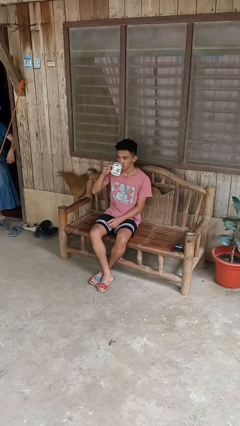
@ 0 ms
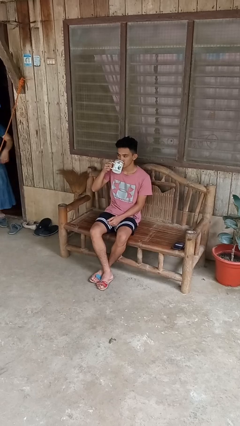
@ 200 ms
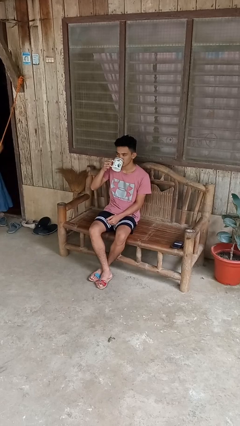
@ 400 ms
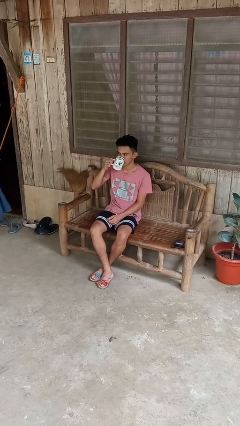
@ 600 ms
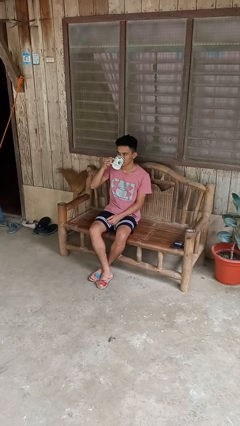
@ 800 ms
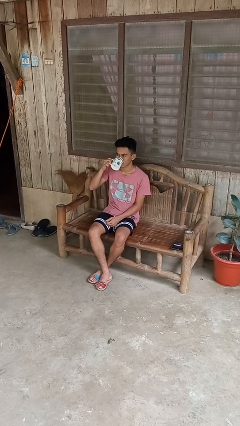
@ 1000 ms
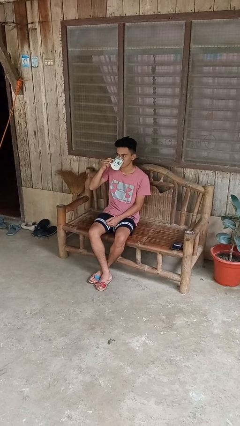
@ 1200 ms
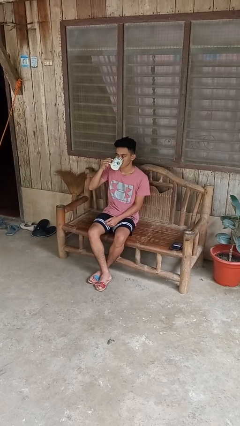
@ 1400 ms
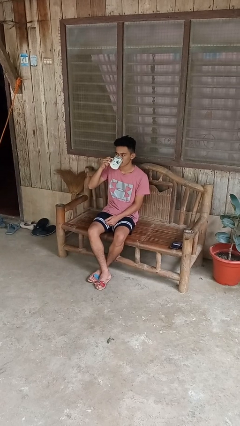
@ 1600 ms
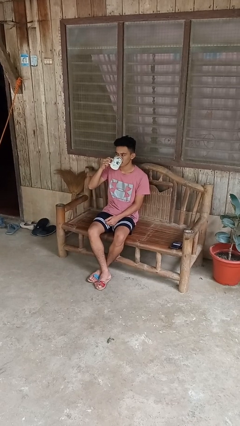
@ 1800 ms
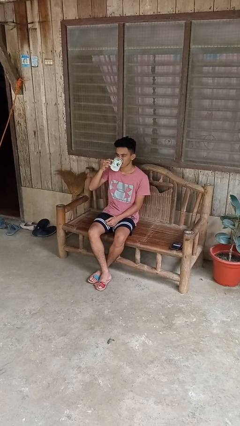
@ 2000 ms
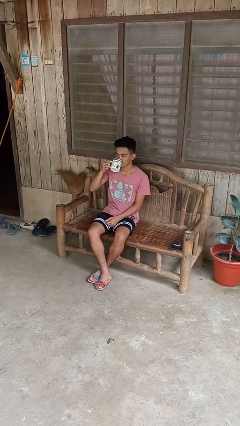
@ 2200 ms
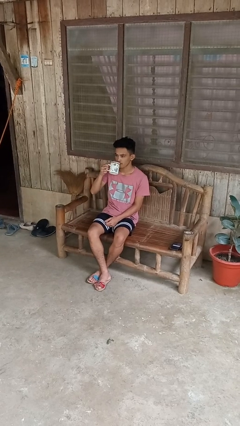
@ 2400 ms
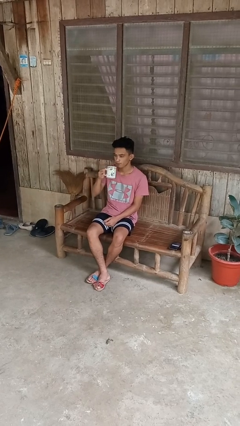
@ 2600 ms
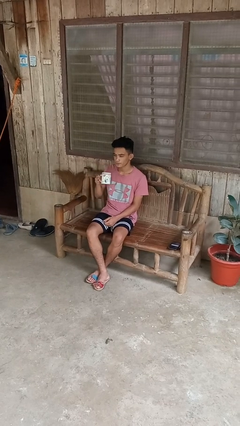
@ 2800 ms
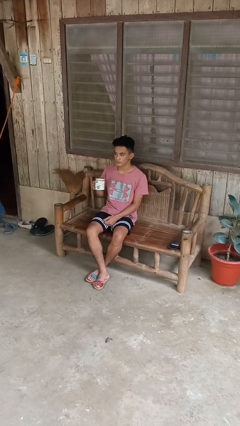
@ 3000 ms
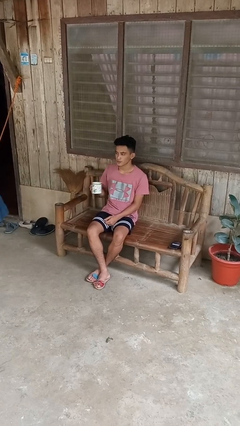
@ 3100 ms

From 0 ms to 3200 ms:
person drinks from mug

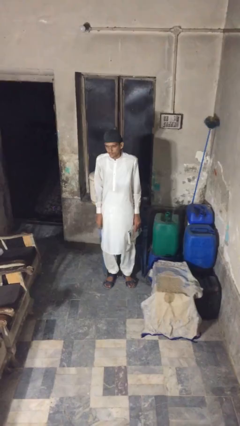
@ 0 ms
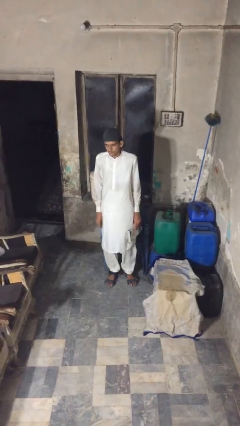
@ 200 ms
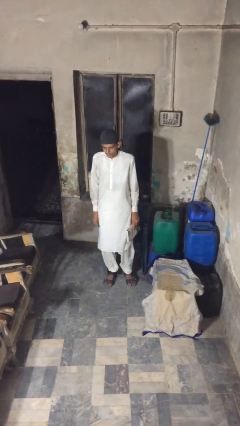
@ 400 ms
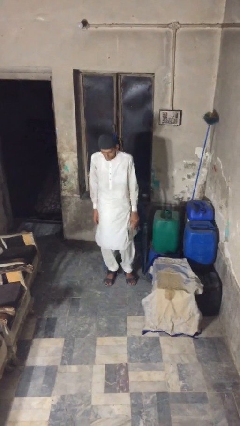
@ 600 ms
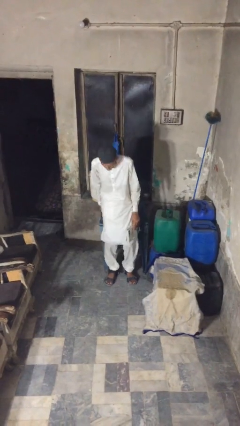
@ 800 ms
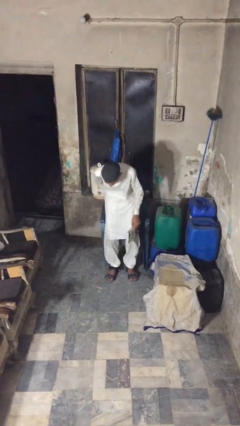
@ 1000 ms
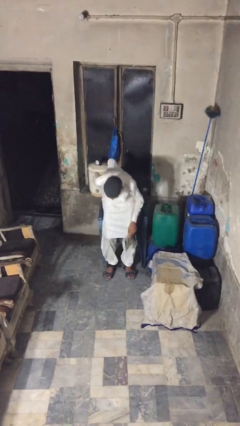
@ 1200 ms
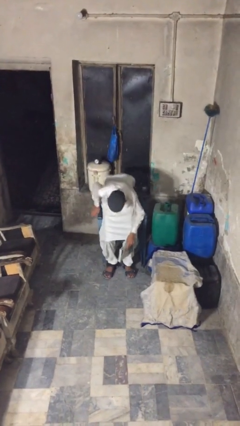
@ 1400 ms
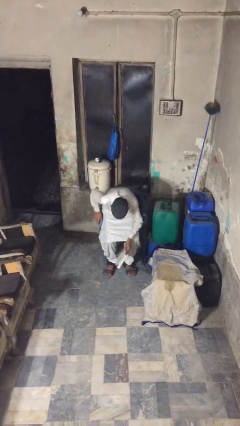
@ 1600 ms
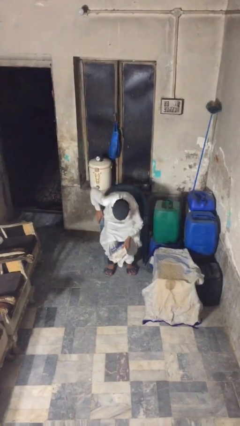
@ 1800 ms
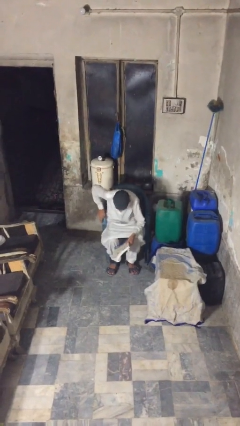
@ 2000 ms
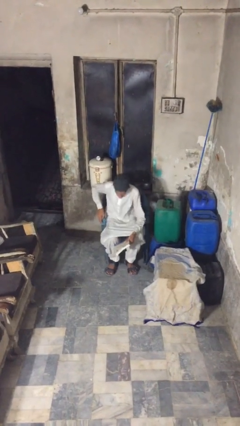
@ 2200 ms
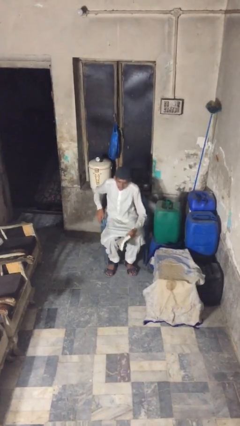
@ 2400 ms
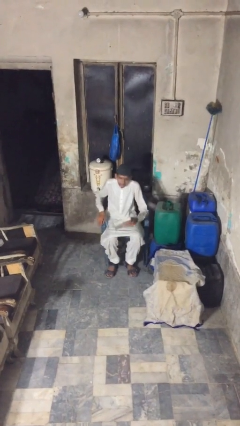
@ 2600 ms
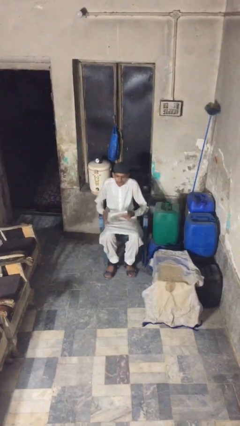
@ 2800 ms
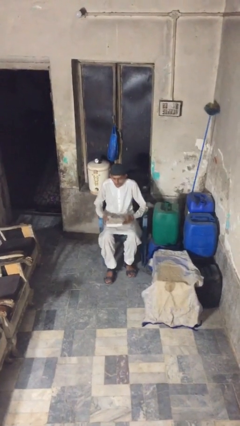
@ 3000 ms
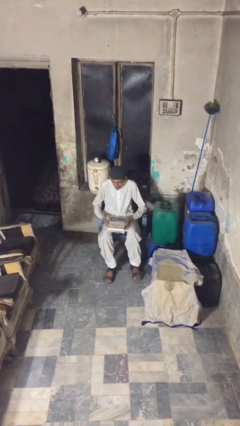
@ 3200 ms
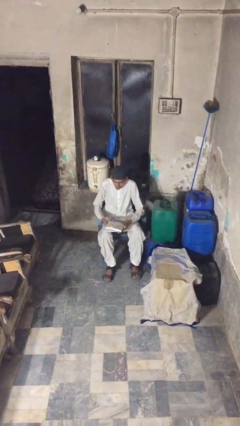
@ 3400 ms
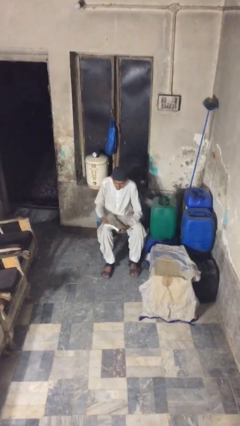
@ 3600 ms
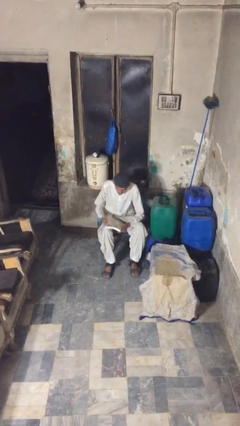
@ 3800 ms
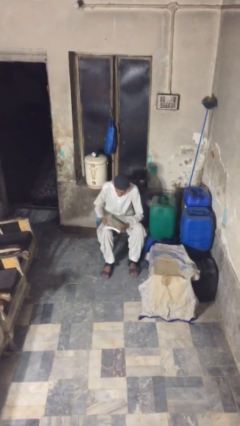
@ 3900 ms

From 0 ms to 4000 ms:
person sits down

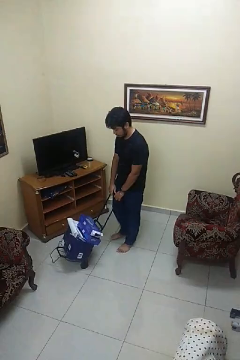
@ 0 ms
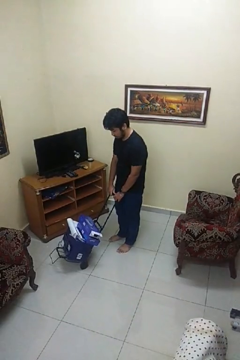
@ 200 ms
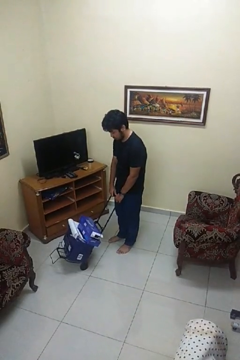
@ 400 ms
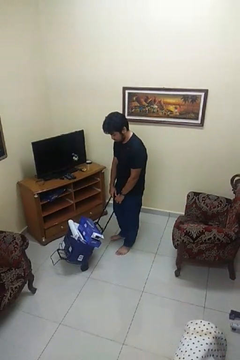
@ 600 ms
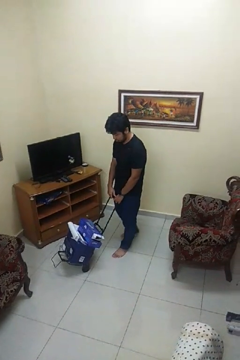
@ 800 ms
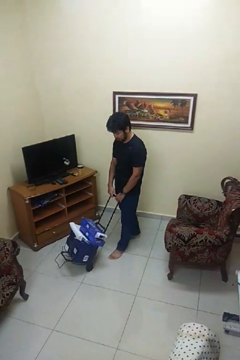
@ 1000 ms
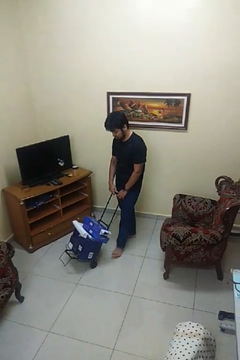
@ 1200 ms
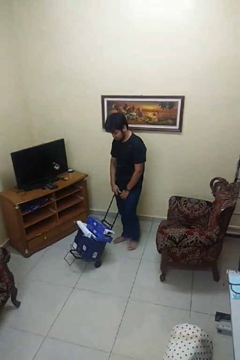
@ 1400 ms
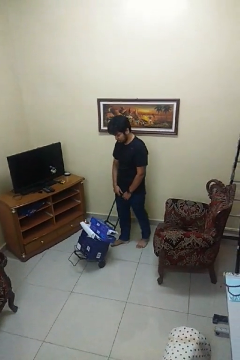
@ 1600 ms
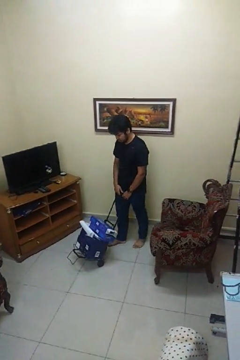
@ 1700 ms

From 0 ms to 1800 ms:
person pulls wheeled cart

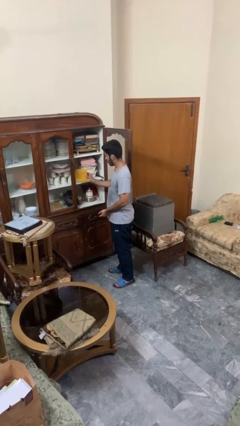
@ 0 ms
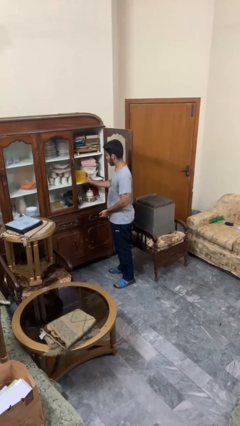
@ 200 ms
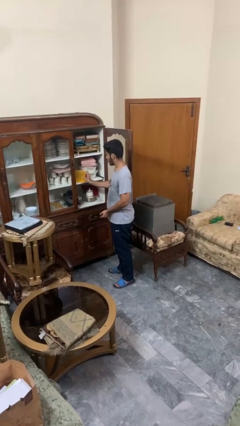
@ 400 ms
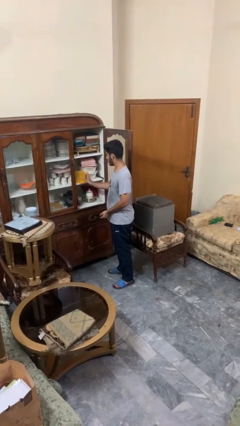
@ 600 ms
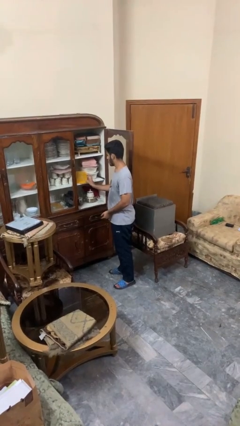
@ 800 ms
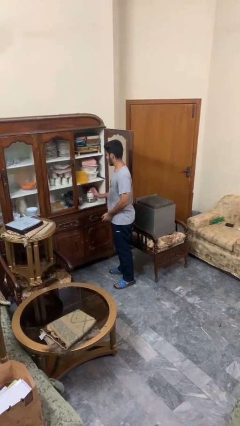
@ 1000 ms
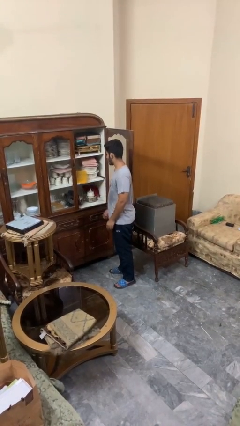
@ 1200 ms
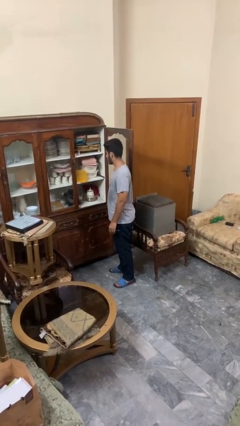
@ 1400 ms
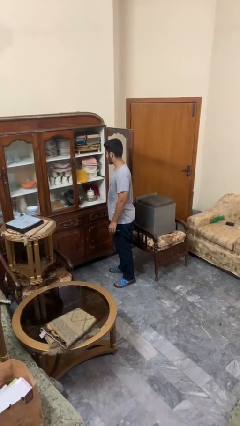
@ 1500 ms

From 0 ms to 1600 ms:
person puts down object into cabinet

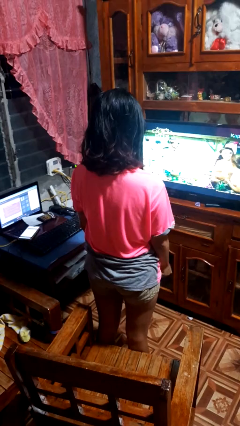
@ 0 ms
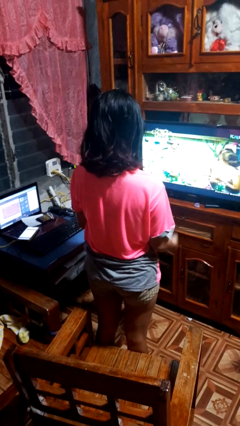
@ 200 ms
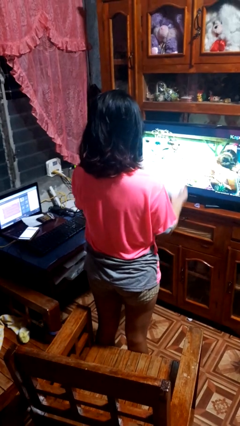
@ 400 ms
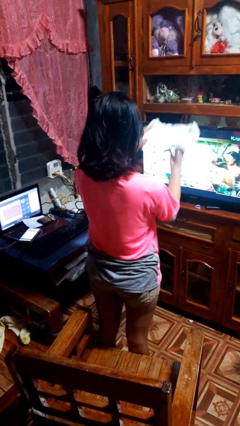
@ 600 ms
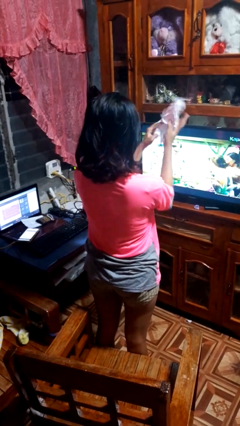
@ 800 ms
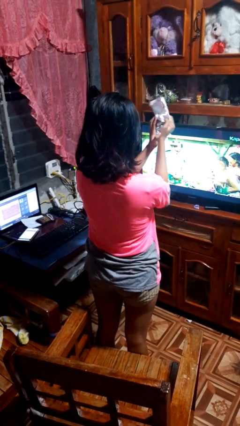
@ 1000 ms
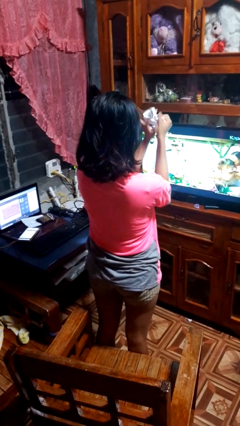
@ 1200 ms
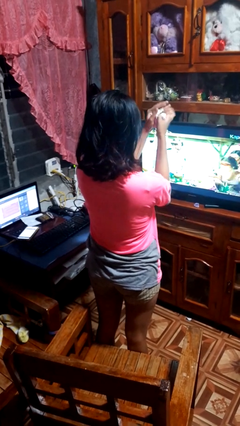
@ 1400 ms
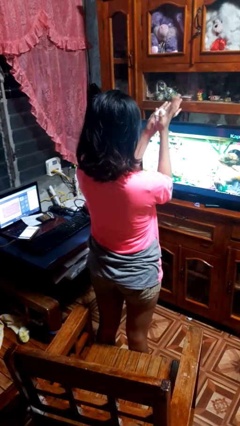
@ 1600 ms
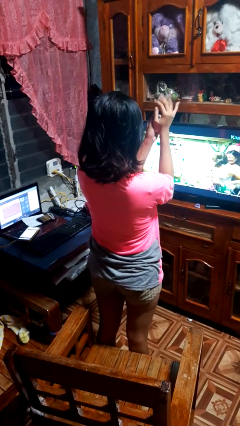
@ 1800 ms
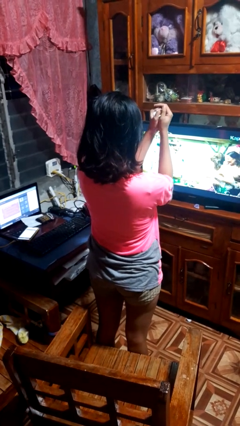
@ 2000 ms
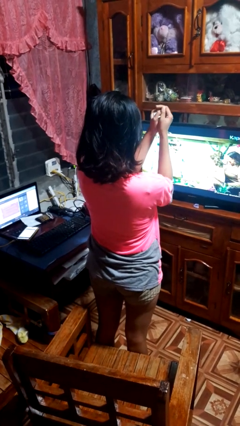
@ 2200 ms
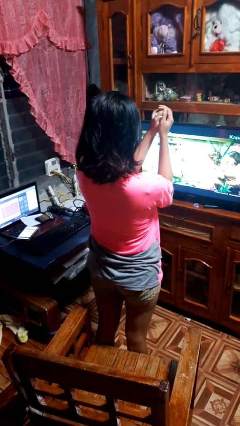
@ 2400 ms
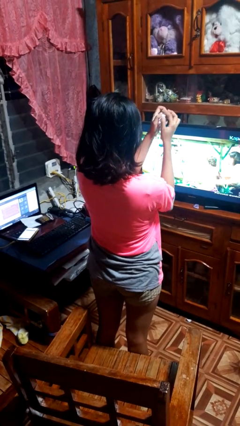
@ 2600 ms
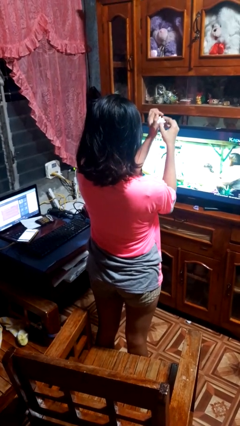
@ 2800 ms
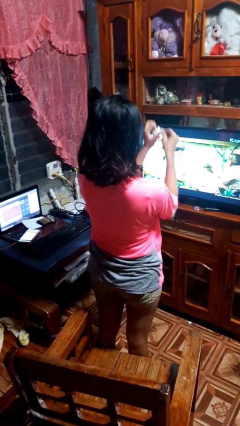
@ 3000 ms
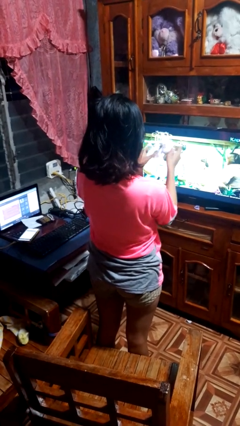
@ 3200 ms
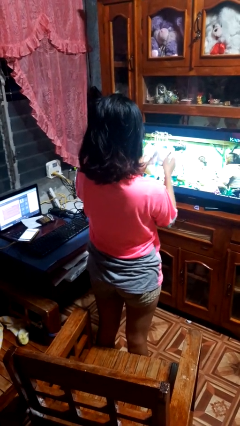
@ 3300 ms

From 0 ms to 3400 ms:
person crumples paper

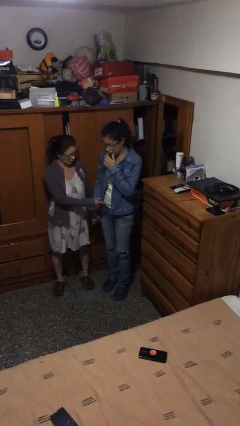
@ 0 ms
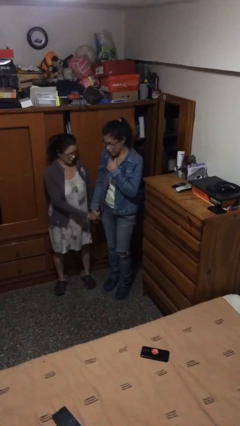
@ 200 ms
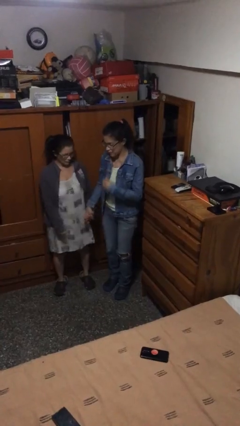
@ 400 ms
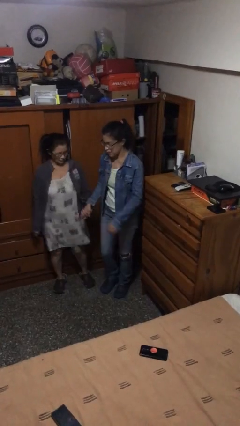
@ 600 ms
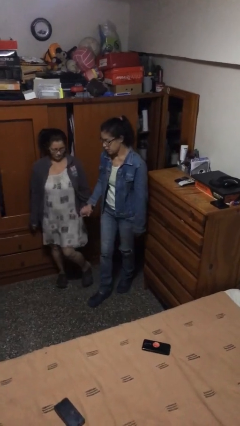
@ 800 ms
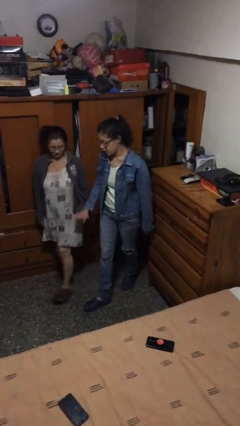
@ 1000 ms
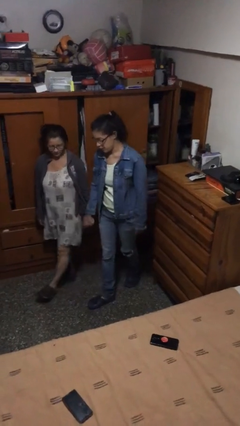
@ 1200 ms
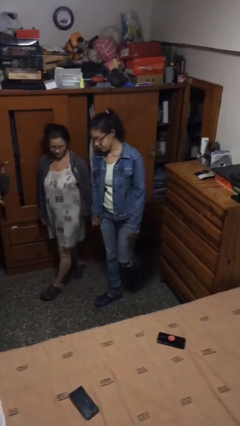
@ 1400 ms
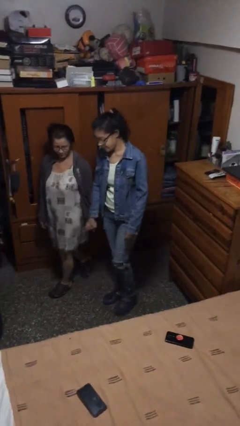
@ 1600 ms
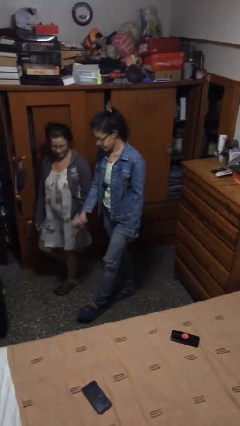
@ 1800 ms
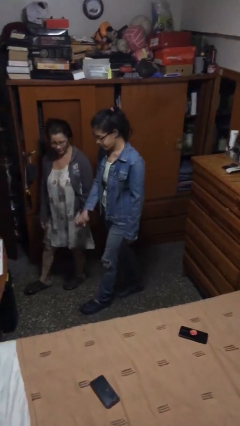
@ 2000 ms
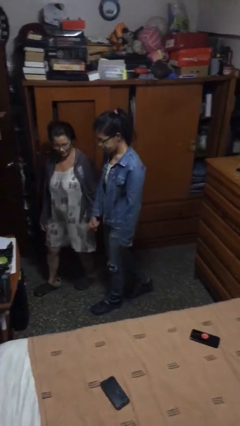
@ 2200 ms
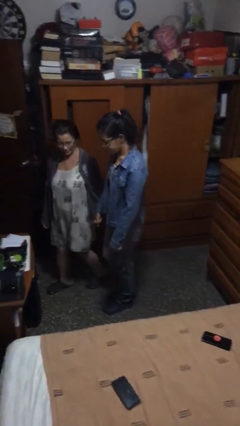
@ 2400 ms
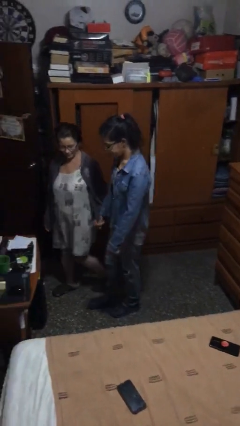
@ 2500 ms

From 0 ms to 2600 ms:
person holds hand

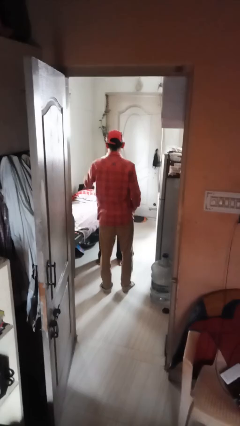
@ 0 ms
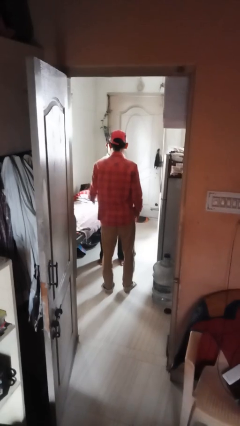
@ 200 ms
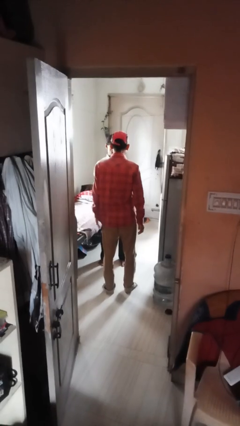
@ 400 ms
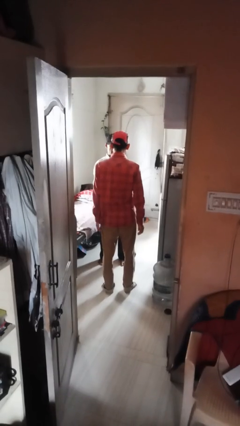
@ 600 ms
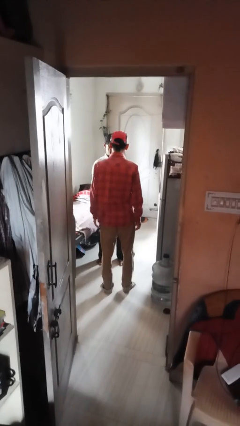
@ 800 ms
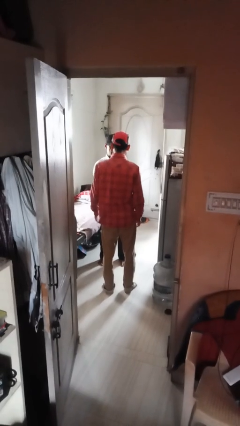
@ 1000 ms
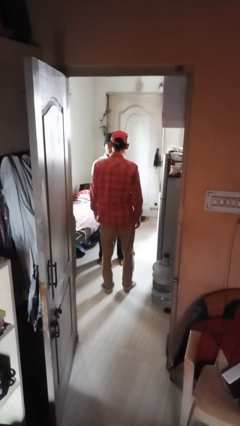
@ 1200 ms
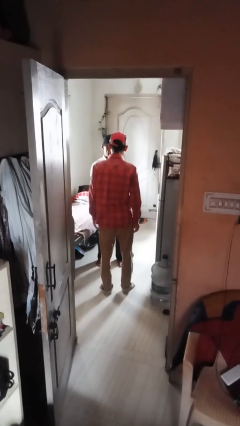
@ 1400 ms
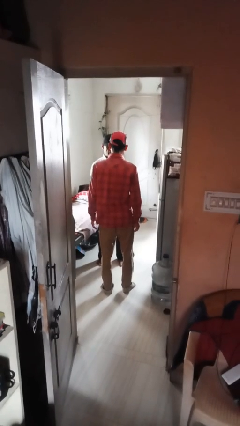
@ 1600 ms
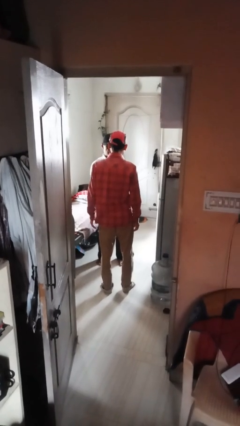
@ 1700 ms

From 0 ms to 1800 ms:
person spins person around
